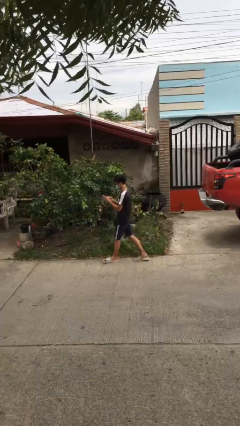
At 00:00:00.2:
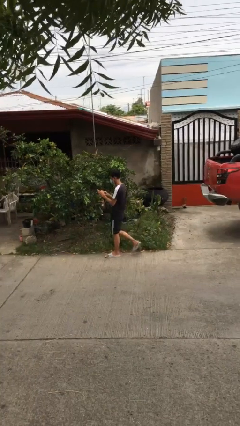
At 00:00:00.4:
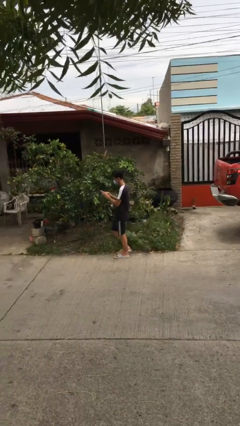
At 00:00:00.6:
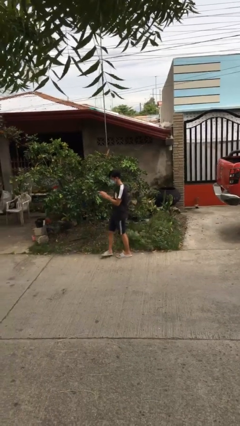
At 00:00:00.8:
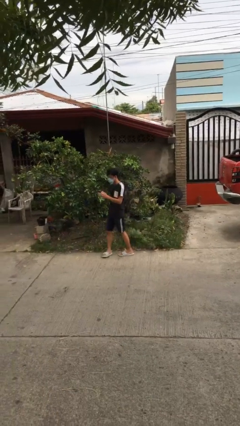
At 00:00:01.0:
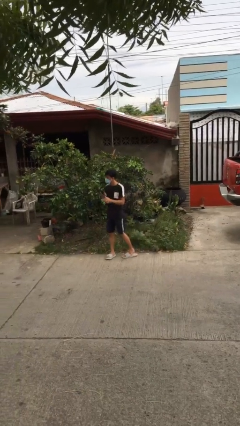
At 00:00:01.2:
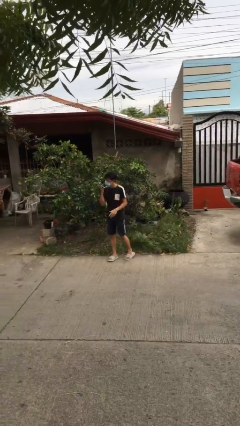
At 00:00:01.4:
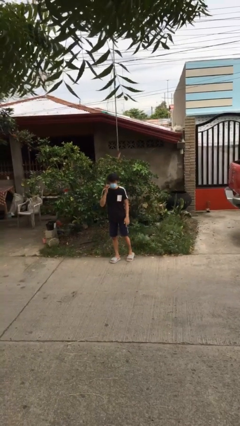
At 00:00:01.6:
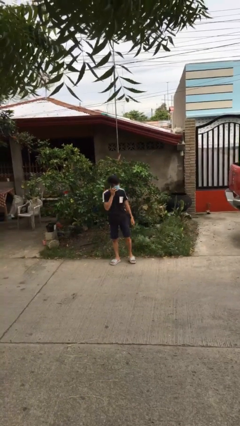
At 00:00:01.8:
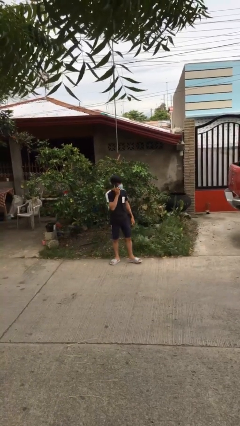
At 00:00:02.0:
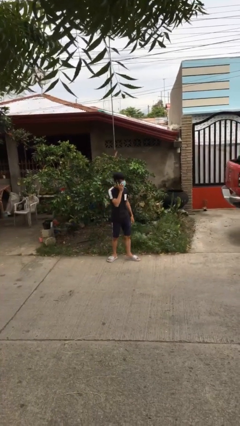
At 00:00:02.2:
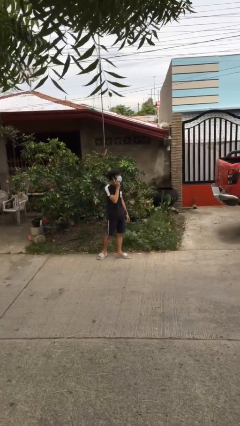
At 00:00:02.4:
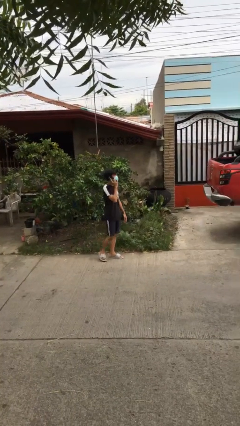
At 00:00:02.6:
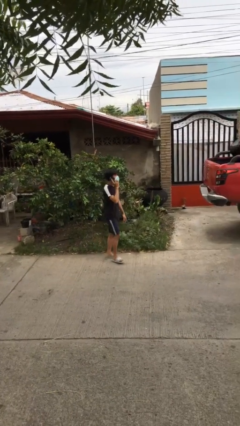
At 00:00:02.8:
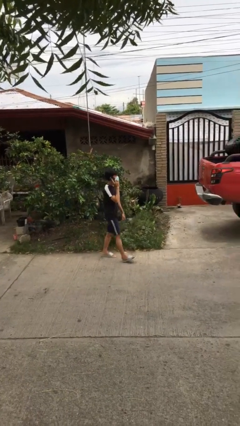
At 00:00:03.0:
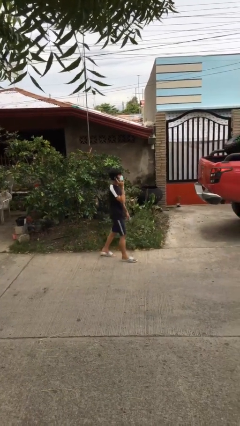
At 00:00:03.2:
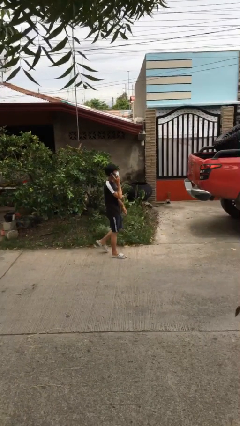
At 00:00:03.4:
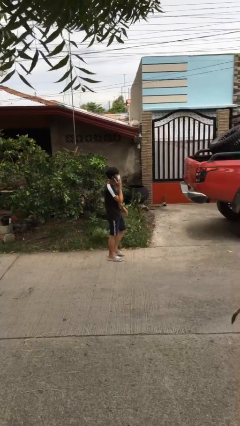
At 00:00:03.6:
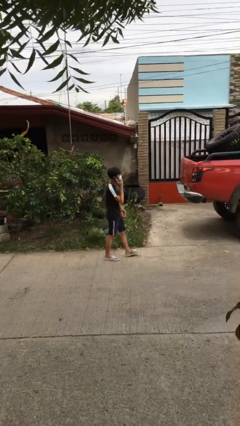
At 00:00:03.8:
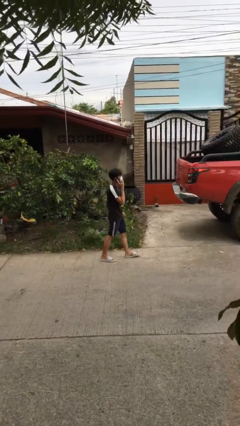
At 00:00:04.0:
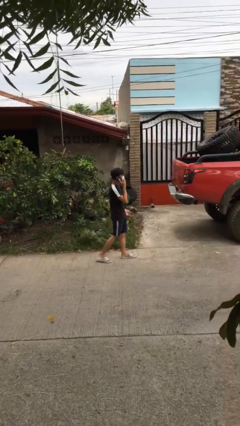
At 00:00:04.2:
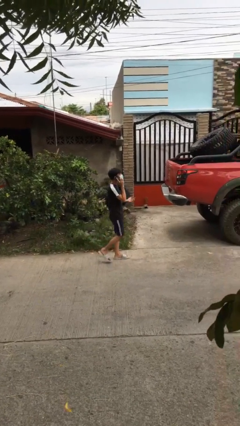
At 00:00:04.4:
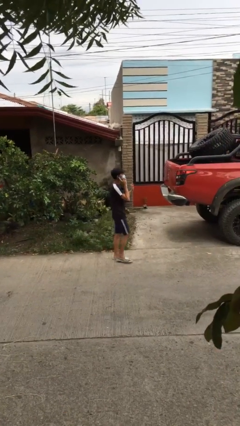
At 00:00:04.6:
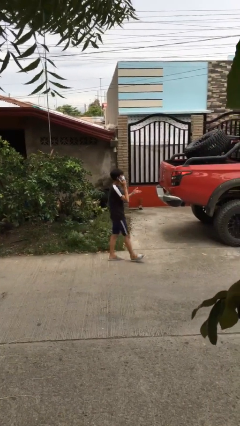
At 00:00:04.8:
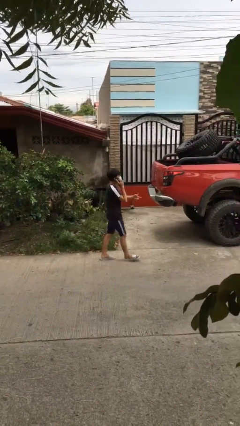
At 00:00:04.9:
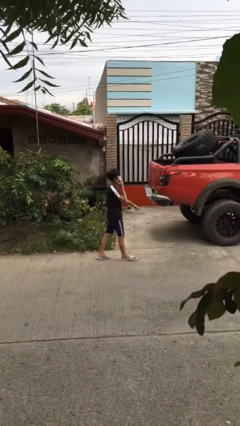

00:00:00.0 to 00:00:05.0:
person talks on phone

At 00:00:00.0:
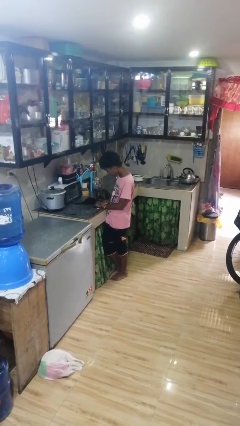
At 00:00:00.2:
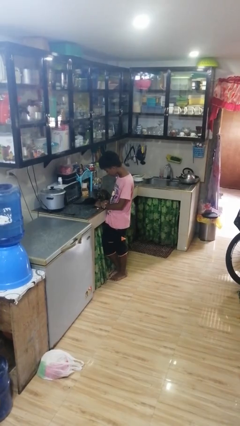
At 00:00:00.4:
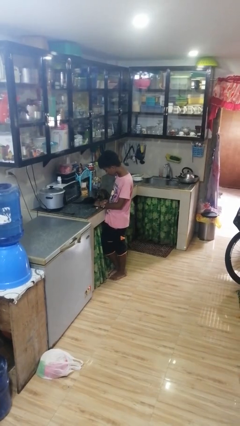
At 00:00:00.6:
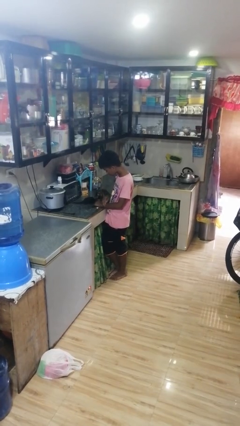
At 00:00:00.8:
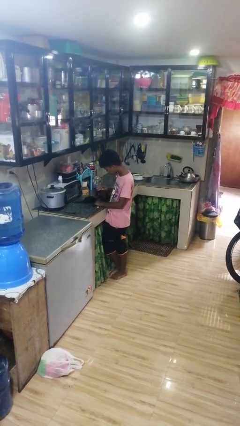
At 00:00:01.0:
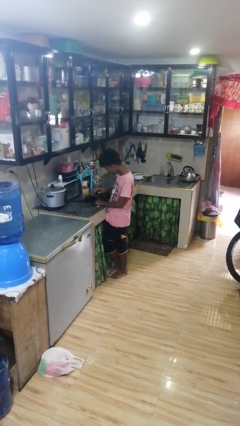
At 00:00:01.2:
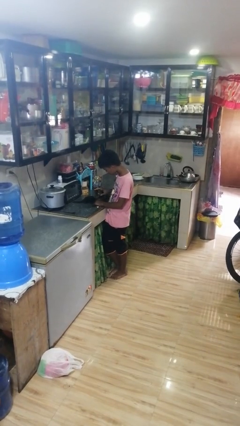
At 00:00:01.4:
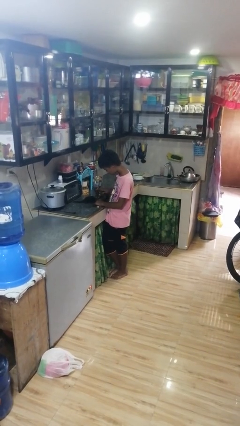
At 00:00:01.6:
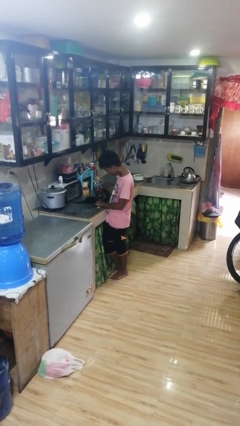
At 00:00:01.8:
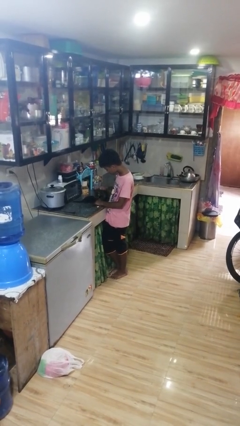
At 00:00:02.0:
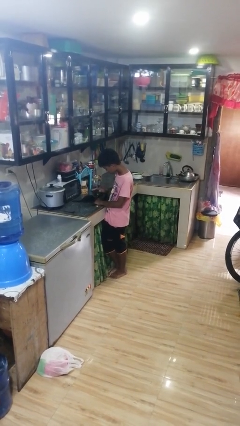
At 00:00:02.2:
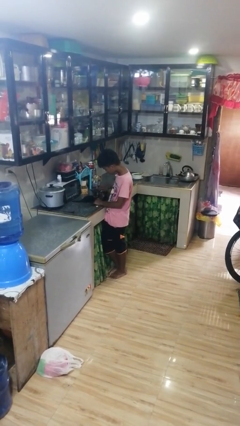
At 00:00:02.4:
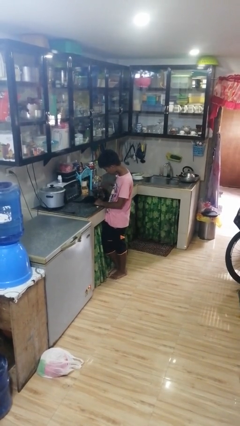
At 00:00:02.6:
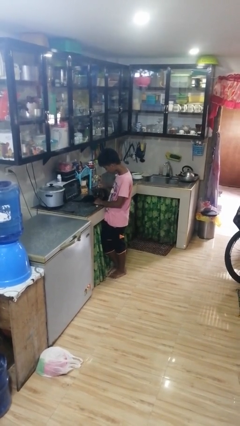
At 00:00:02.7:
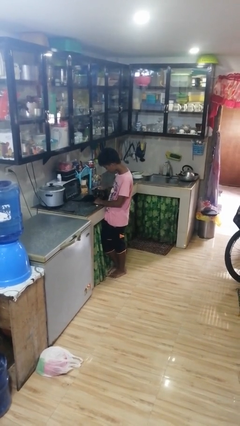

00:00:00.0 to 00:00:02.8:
person pets cat

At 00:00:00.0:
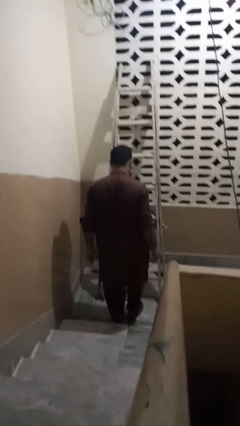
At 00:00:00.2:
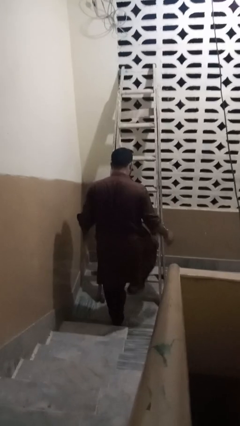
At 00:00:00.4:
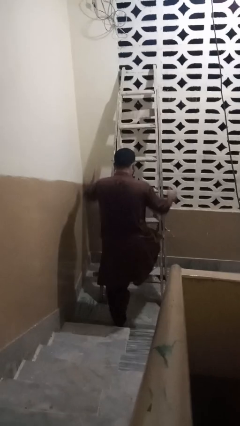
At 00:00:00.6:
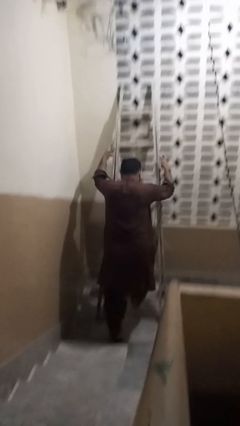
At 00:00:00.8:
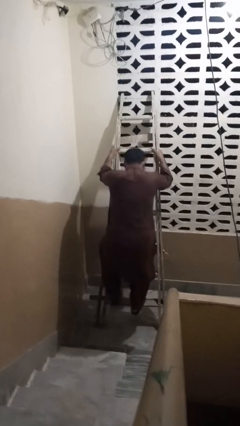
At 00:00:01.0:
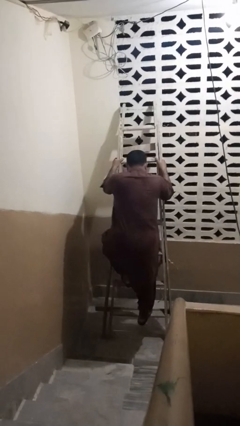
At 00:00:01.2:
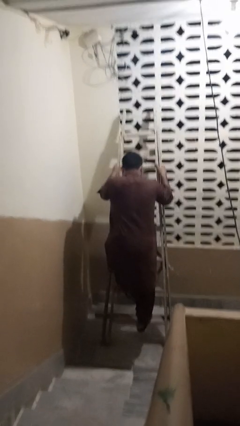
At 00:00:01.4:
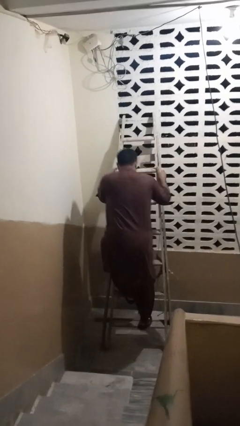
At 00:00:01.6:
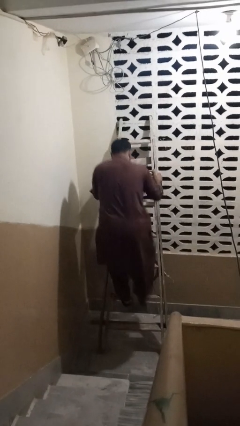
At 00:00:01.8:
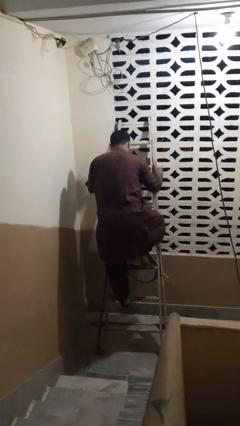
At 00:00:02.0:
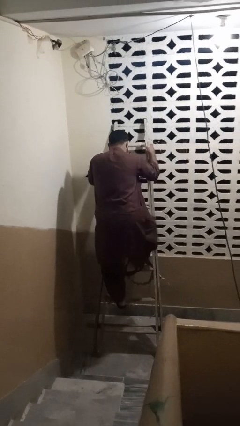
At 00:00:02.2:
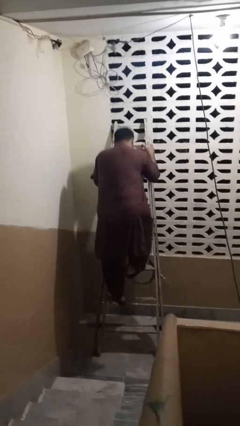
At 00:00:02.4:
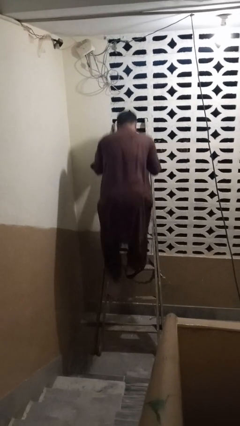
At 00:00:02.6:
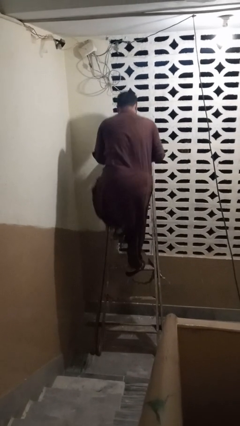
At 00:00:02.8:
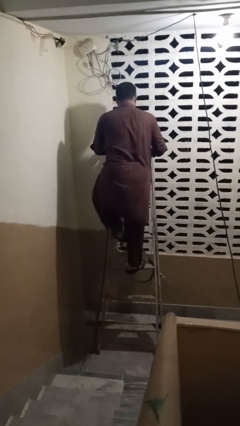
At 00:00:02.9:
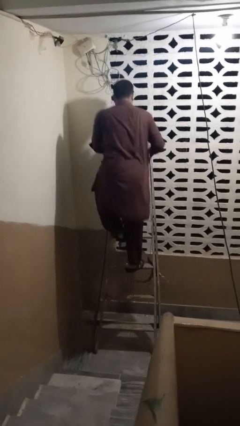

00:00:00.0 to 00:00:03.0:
person climbs up ladder

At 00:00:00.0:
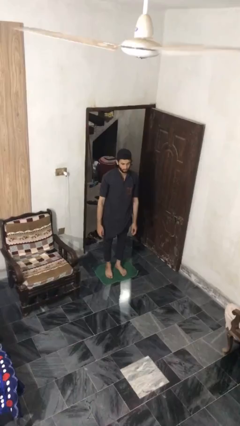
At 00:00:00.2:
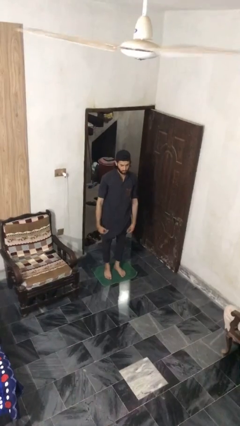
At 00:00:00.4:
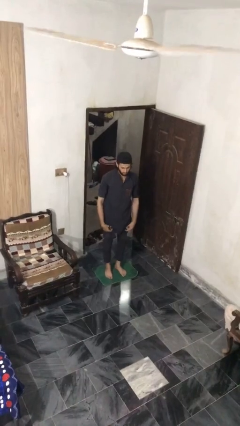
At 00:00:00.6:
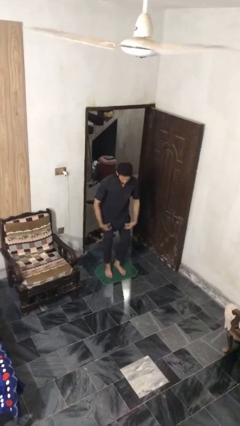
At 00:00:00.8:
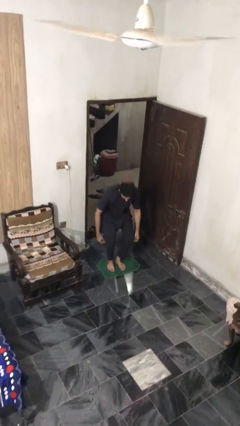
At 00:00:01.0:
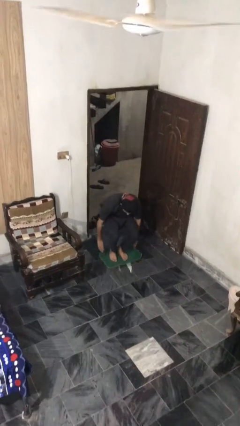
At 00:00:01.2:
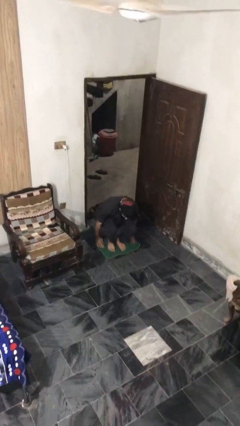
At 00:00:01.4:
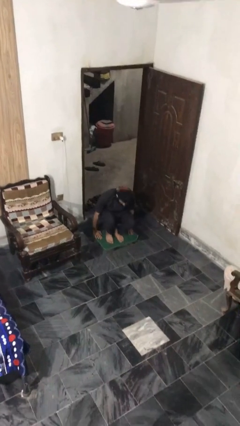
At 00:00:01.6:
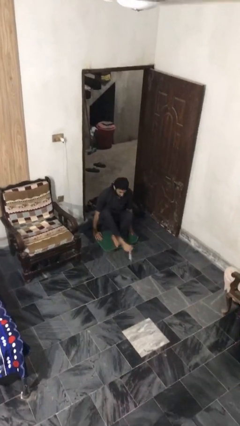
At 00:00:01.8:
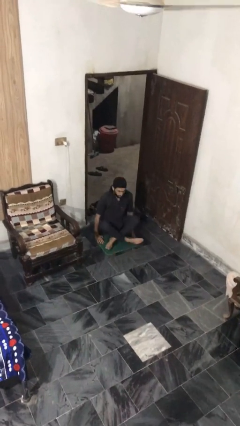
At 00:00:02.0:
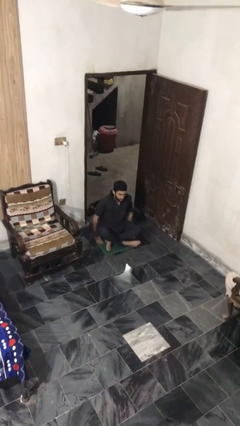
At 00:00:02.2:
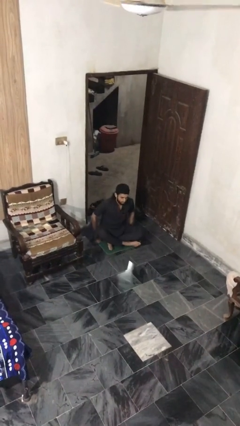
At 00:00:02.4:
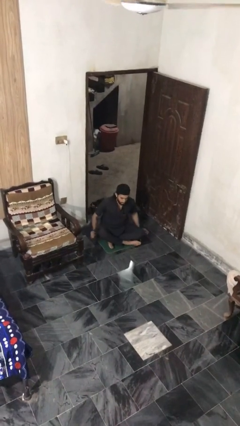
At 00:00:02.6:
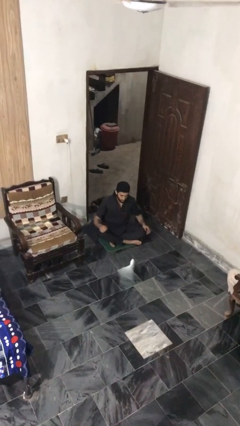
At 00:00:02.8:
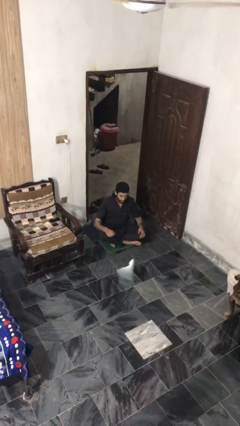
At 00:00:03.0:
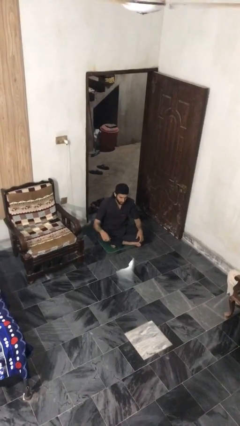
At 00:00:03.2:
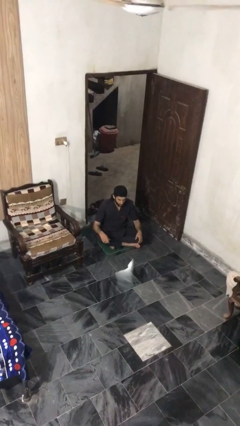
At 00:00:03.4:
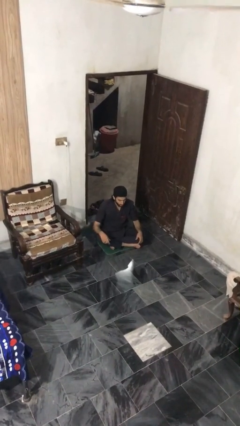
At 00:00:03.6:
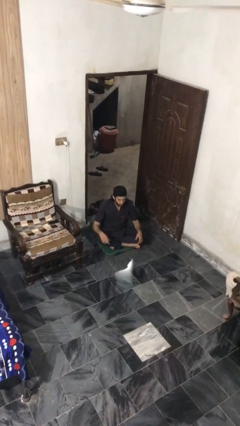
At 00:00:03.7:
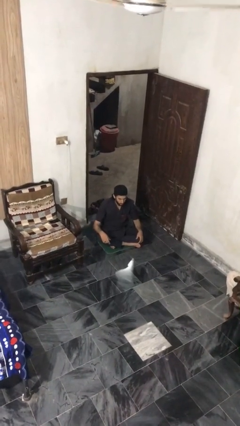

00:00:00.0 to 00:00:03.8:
person sits crisscross

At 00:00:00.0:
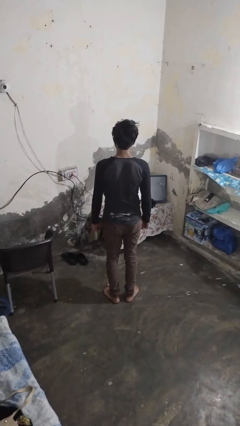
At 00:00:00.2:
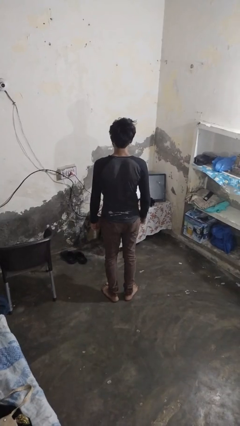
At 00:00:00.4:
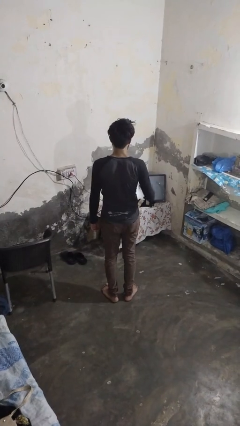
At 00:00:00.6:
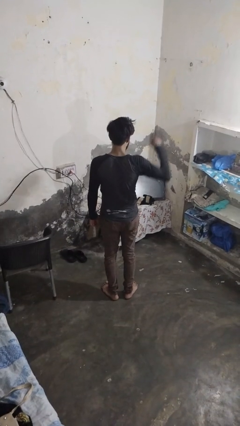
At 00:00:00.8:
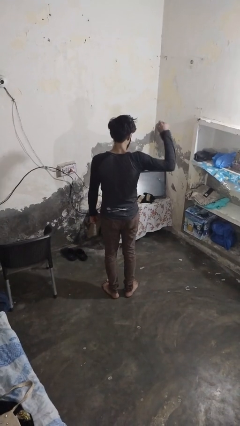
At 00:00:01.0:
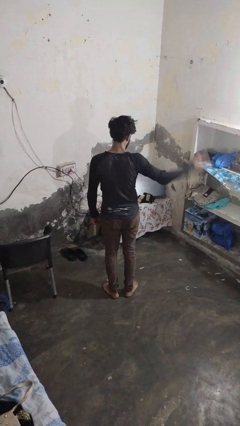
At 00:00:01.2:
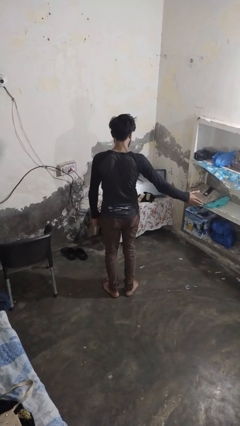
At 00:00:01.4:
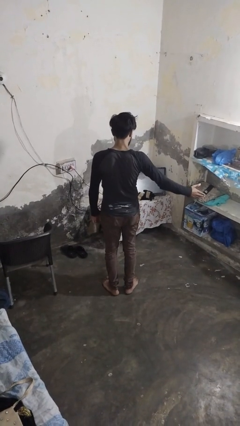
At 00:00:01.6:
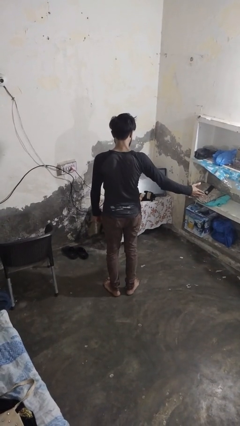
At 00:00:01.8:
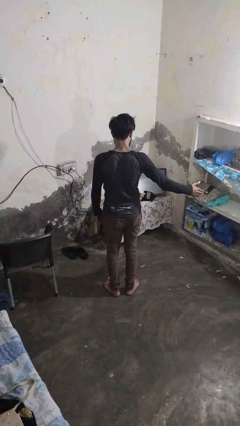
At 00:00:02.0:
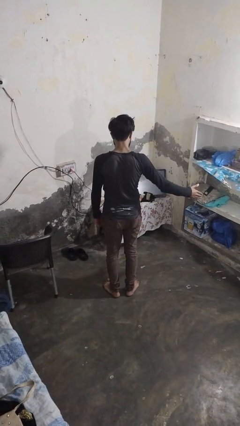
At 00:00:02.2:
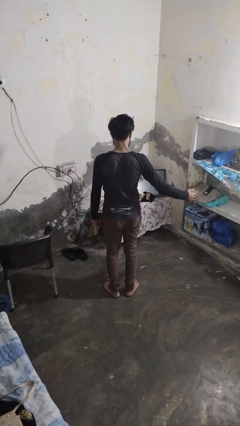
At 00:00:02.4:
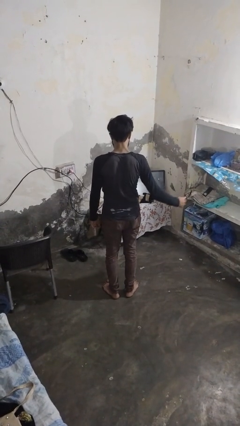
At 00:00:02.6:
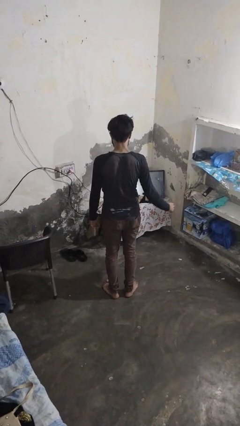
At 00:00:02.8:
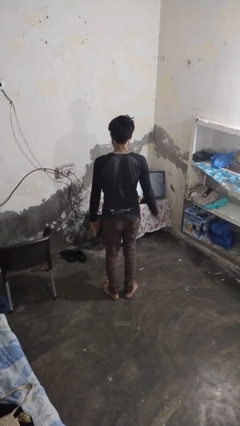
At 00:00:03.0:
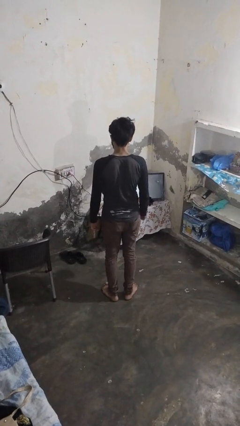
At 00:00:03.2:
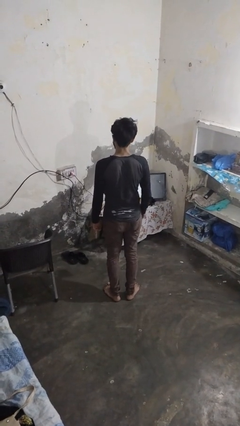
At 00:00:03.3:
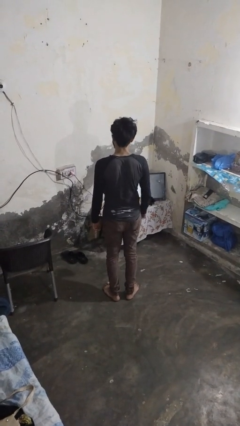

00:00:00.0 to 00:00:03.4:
person karate chop
